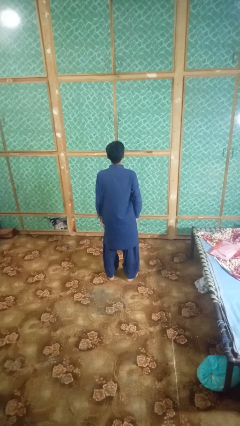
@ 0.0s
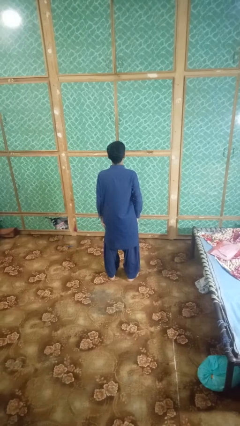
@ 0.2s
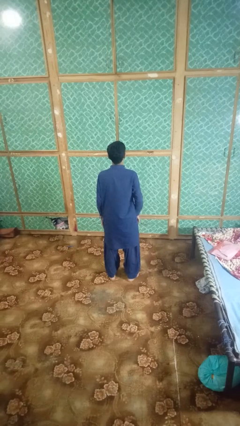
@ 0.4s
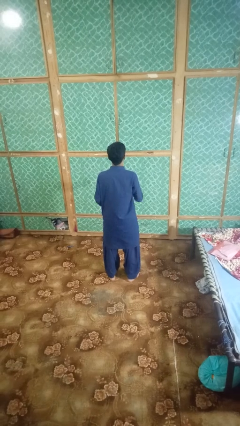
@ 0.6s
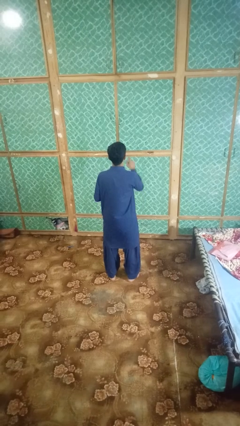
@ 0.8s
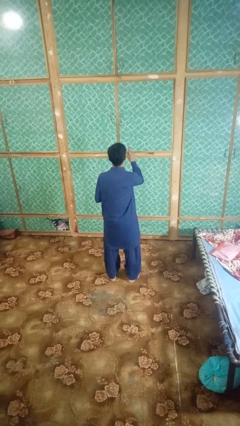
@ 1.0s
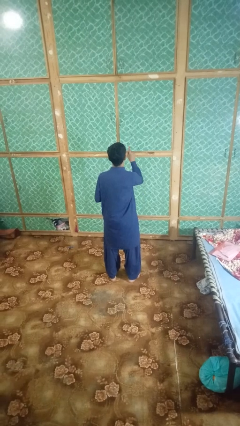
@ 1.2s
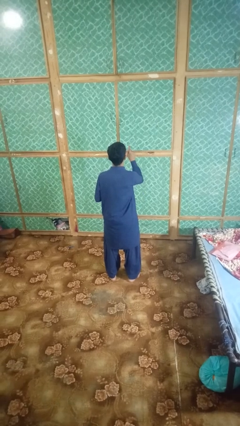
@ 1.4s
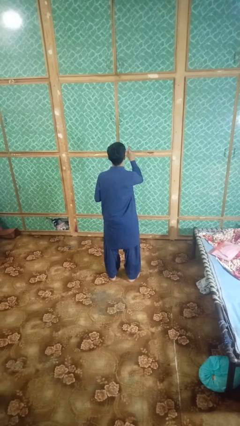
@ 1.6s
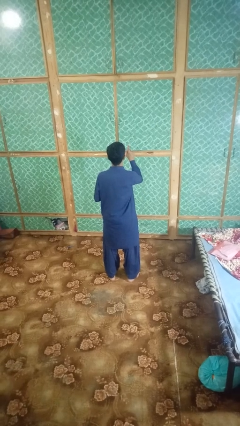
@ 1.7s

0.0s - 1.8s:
person gestures number one

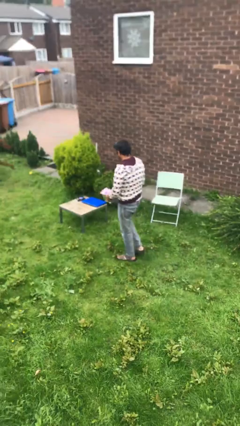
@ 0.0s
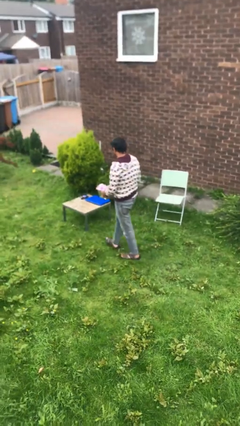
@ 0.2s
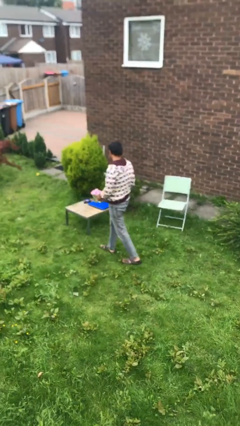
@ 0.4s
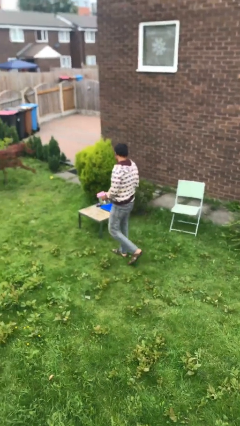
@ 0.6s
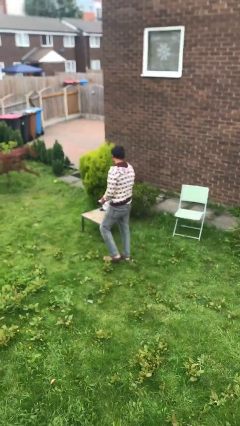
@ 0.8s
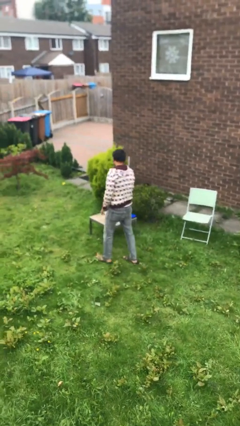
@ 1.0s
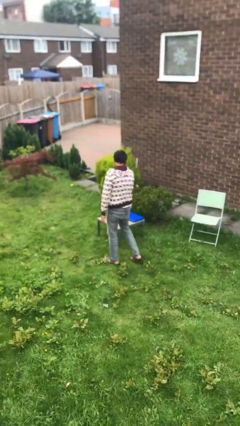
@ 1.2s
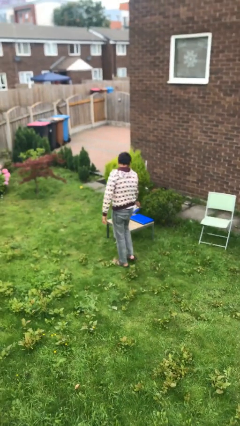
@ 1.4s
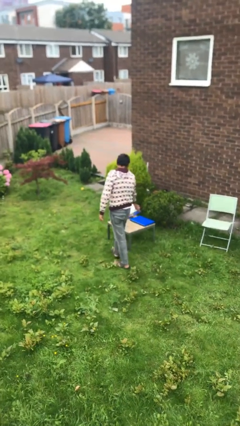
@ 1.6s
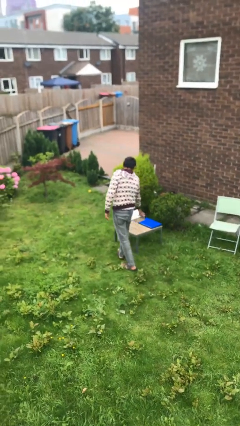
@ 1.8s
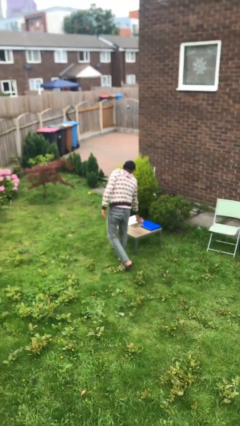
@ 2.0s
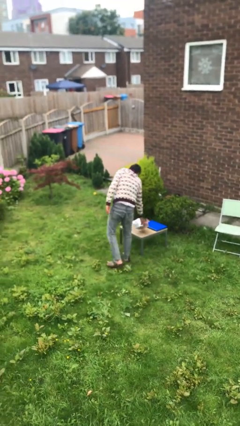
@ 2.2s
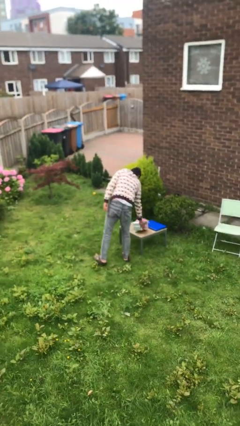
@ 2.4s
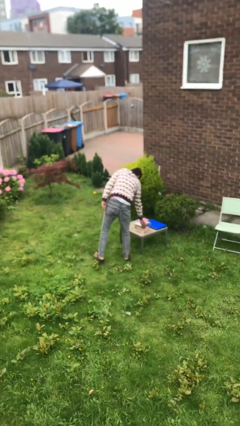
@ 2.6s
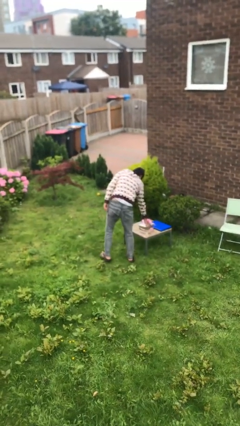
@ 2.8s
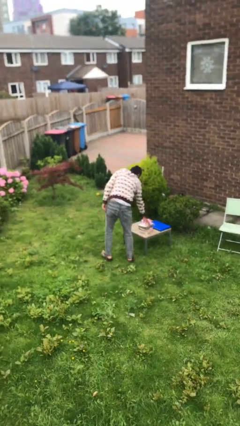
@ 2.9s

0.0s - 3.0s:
person puts down object on table

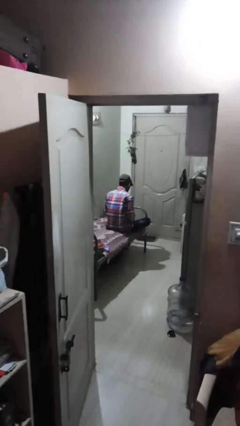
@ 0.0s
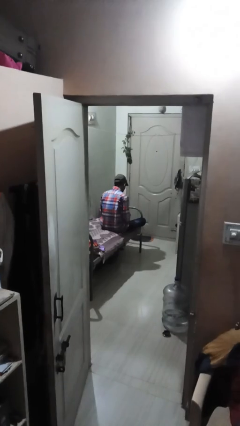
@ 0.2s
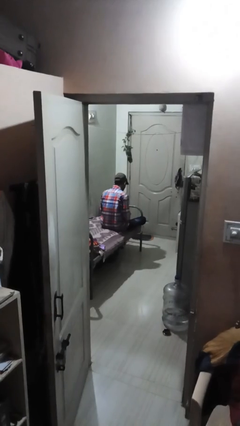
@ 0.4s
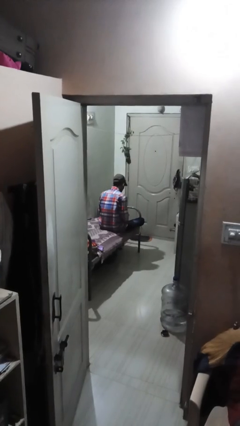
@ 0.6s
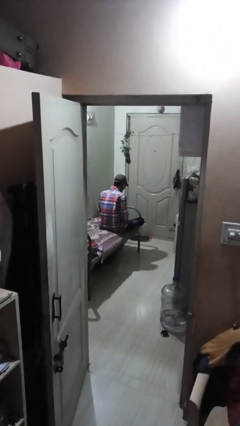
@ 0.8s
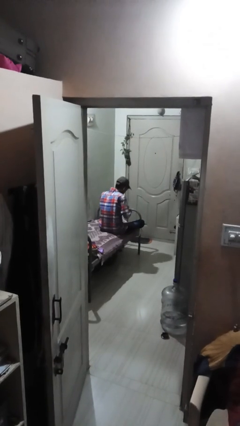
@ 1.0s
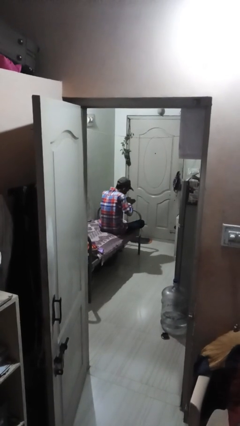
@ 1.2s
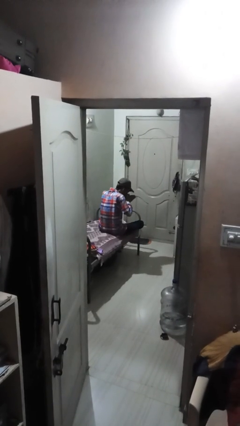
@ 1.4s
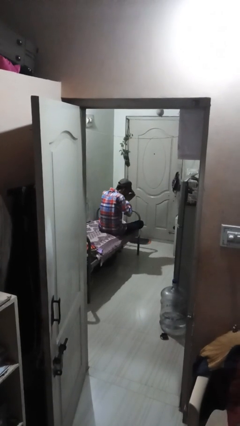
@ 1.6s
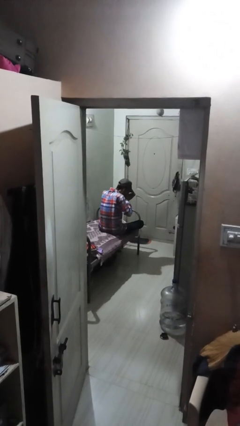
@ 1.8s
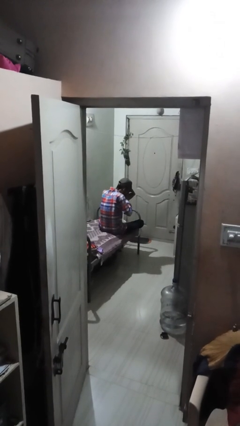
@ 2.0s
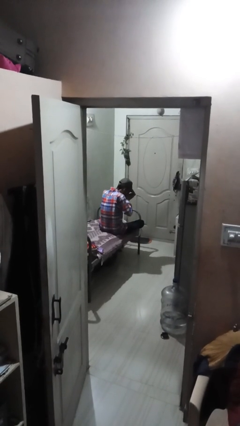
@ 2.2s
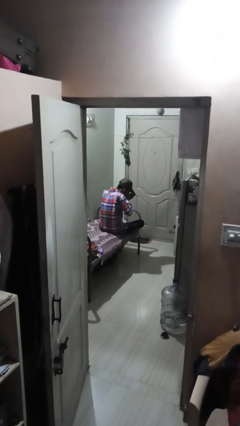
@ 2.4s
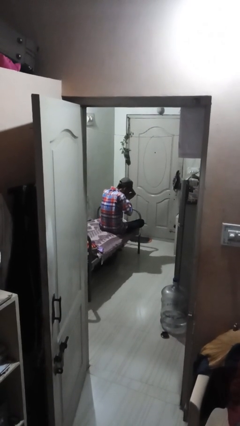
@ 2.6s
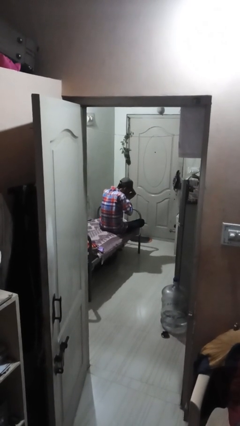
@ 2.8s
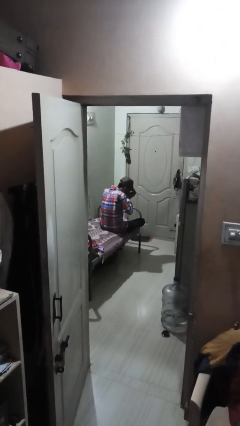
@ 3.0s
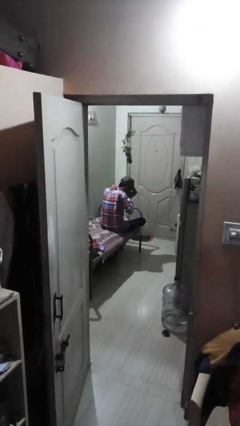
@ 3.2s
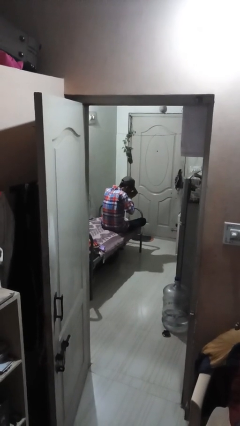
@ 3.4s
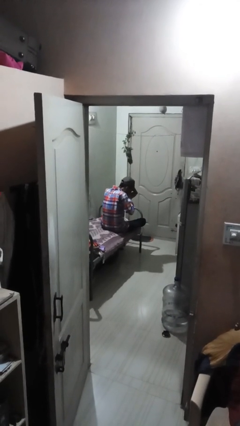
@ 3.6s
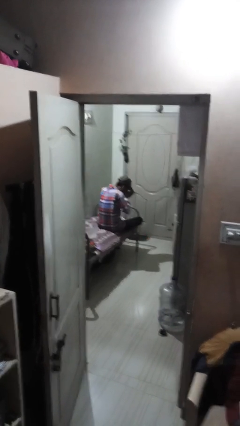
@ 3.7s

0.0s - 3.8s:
person prays

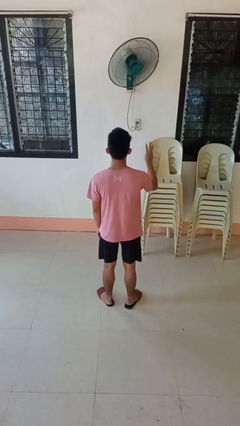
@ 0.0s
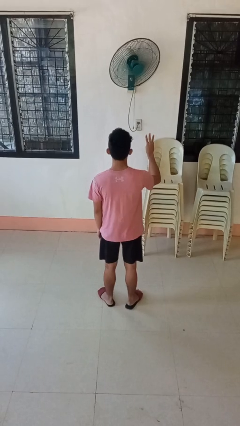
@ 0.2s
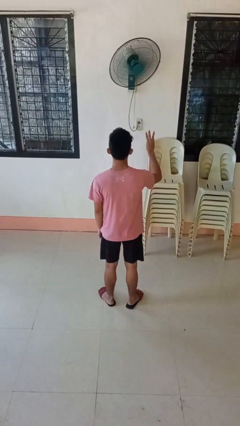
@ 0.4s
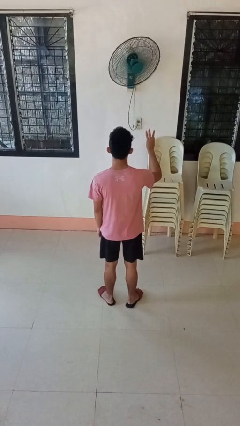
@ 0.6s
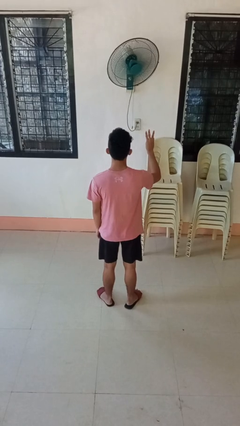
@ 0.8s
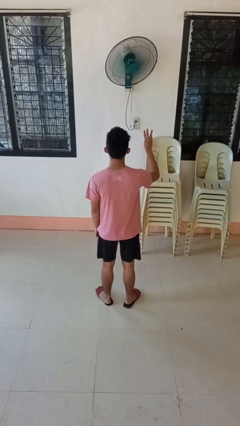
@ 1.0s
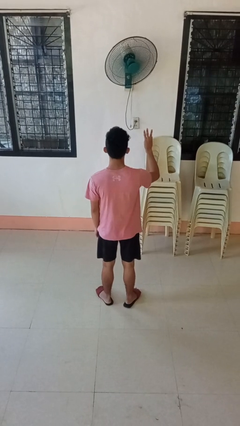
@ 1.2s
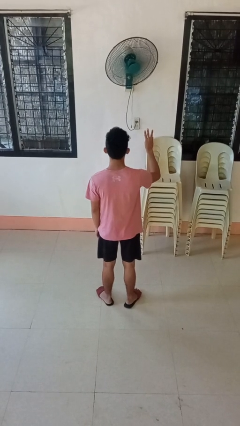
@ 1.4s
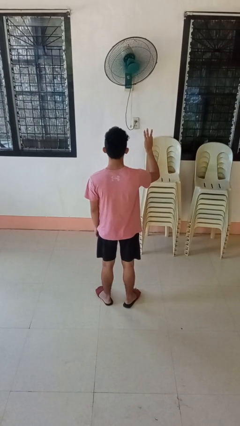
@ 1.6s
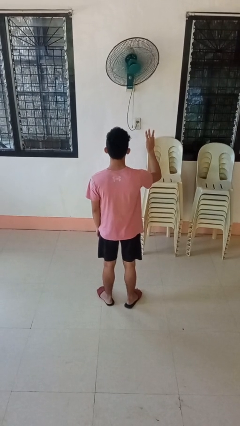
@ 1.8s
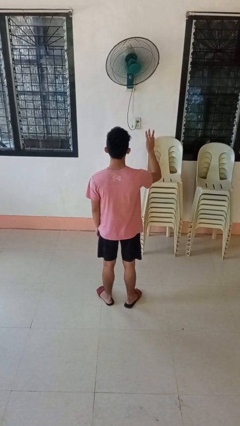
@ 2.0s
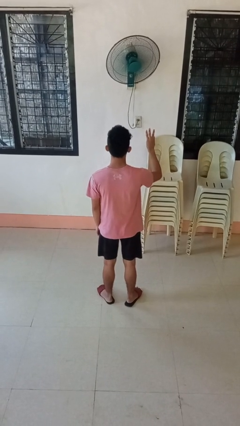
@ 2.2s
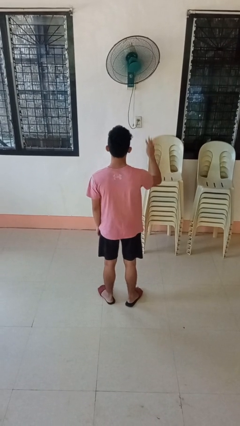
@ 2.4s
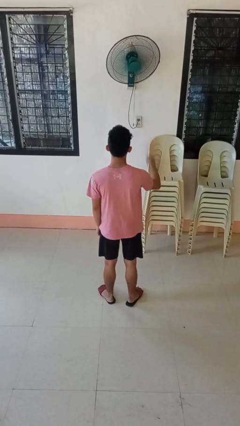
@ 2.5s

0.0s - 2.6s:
person gestures number three

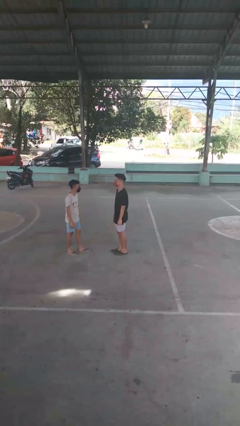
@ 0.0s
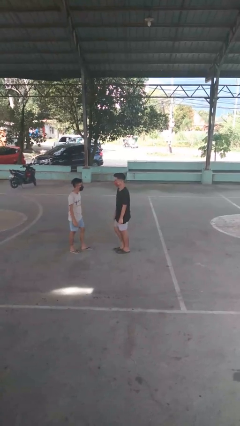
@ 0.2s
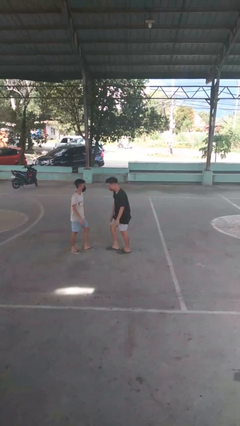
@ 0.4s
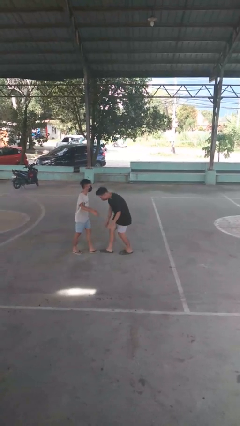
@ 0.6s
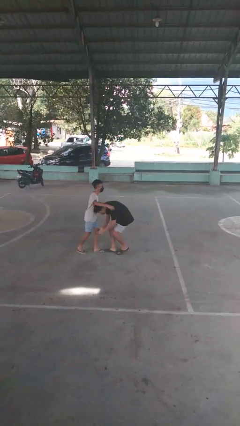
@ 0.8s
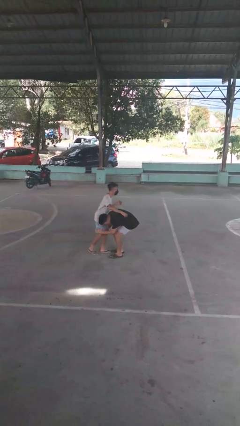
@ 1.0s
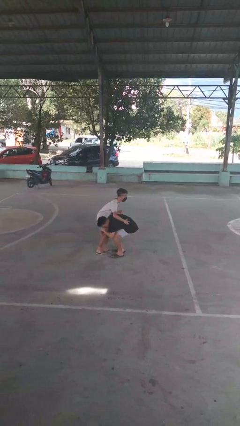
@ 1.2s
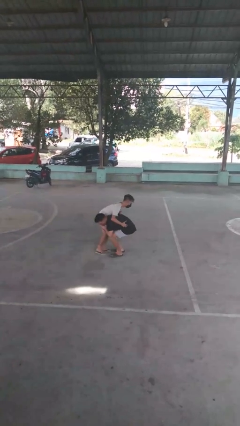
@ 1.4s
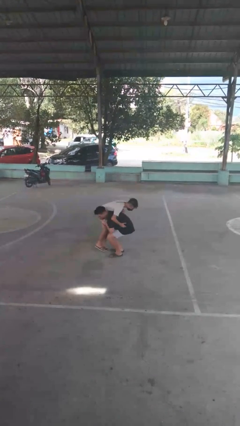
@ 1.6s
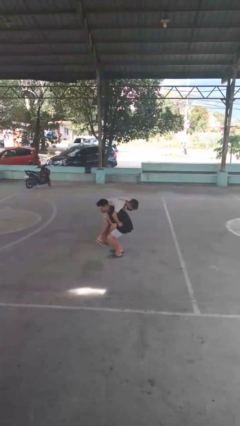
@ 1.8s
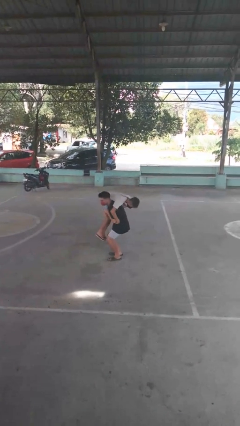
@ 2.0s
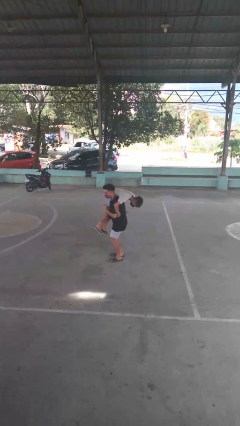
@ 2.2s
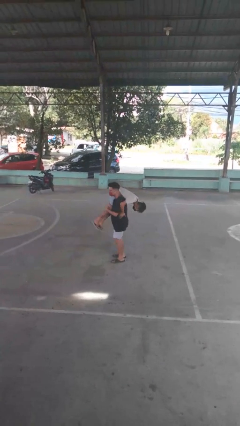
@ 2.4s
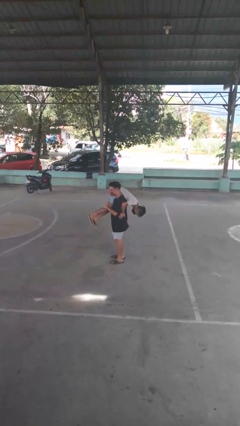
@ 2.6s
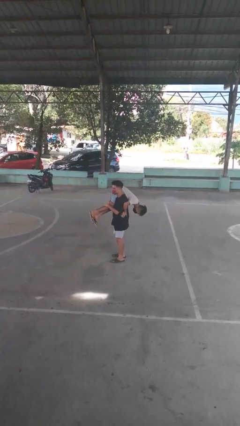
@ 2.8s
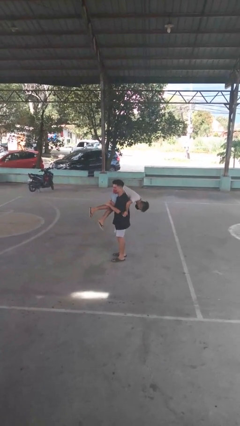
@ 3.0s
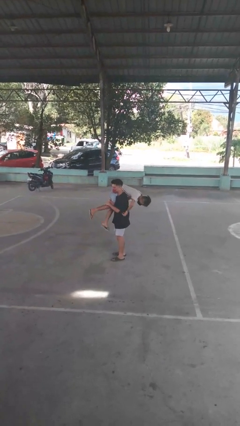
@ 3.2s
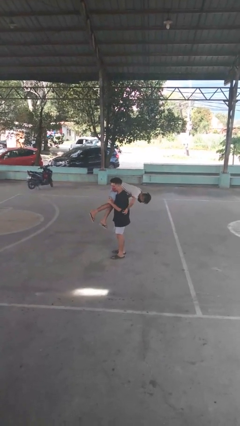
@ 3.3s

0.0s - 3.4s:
person carries person over shoulder

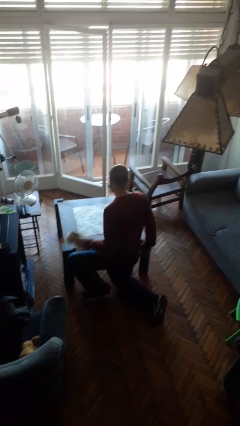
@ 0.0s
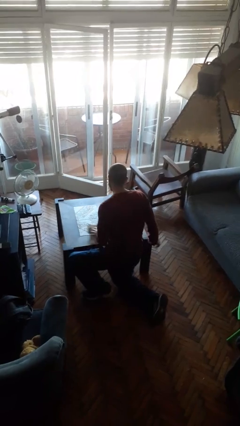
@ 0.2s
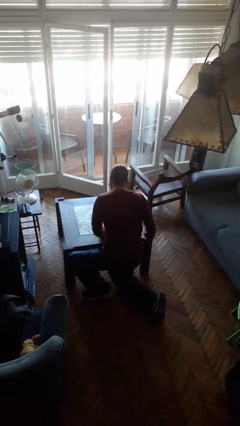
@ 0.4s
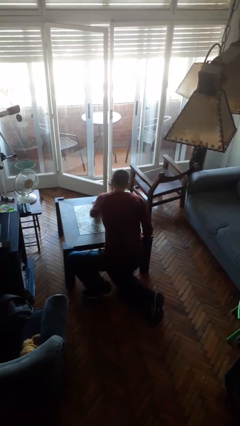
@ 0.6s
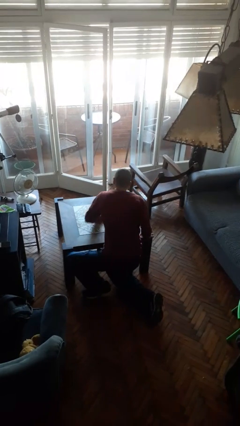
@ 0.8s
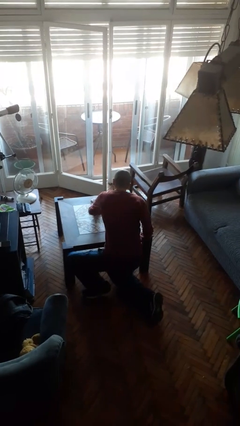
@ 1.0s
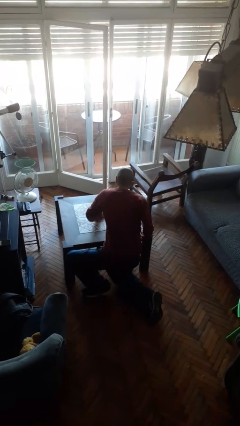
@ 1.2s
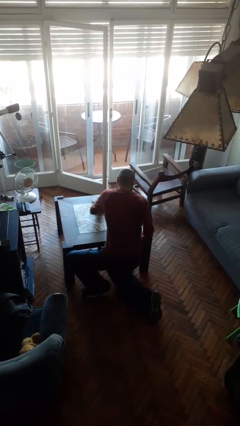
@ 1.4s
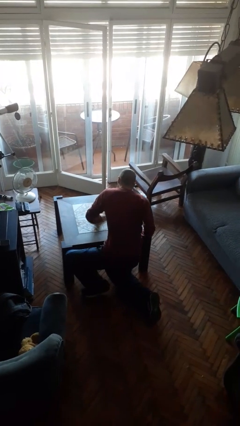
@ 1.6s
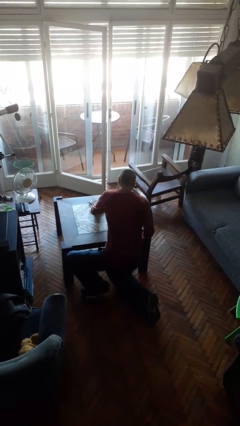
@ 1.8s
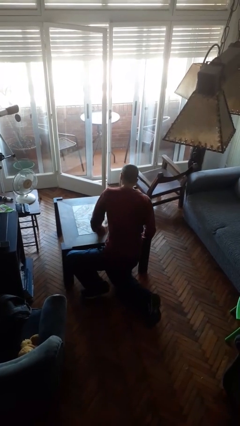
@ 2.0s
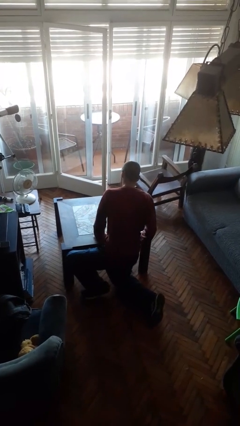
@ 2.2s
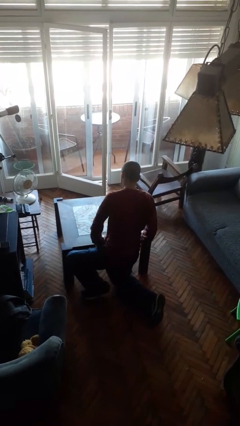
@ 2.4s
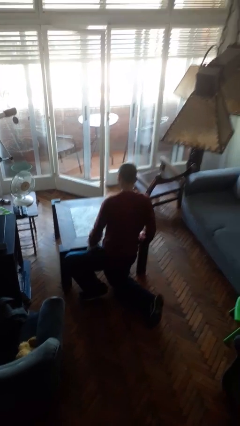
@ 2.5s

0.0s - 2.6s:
person cleans table with rag

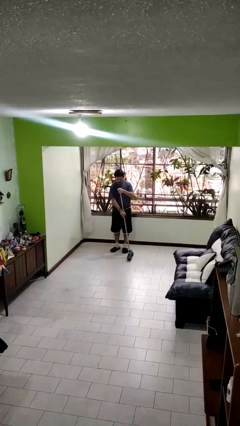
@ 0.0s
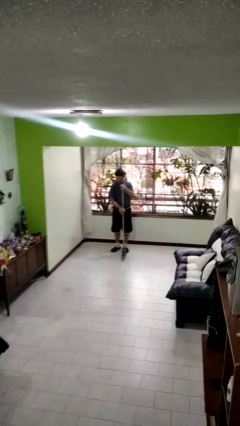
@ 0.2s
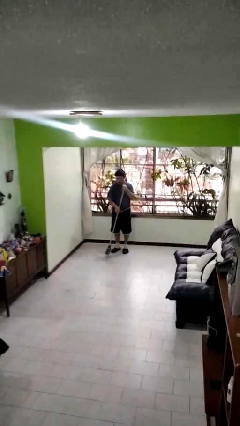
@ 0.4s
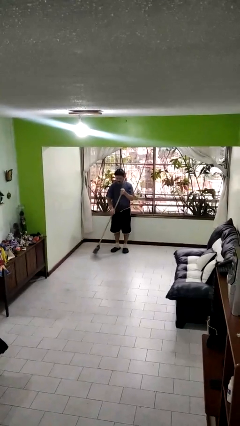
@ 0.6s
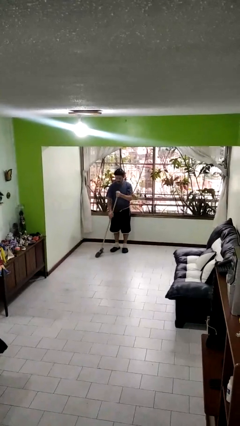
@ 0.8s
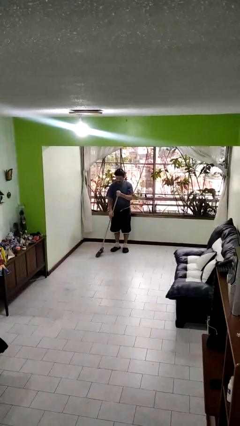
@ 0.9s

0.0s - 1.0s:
person sweeps floor
